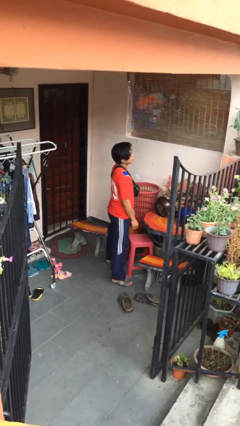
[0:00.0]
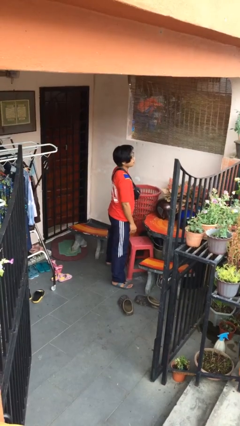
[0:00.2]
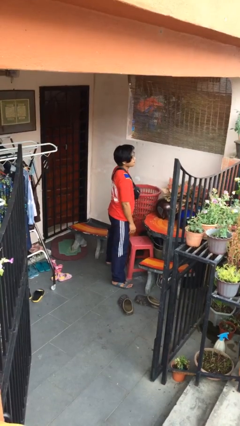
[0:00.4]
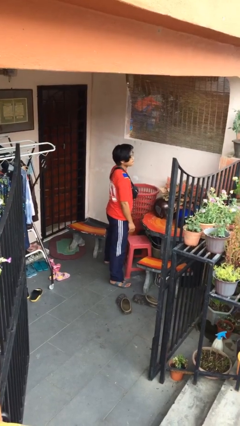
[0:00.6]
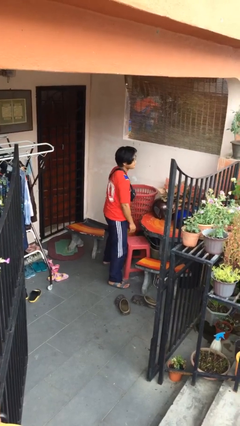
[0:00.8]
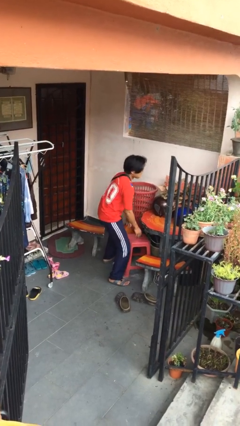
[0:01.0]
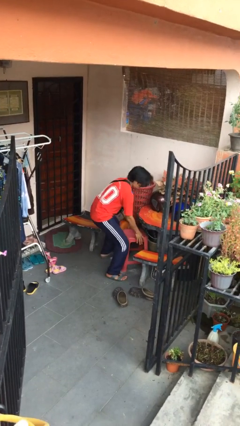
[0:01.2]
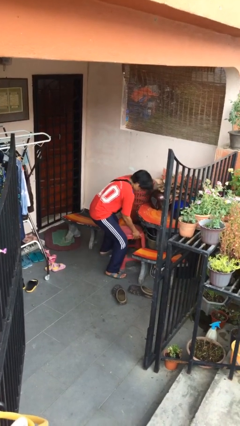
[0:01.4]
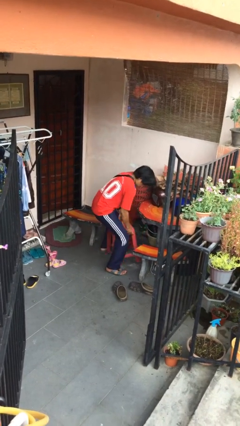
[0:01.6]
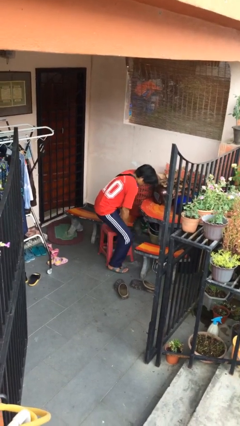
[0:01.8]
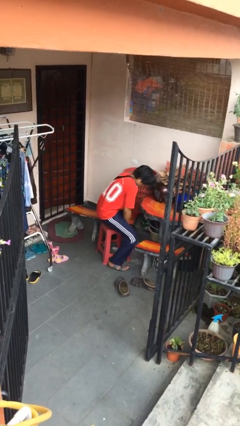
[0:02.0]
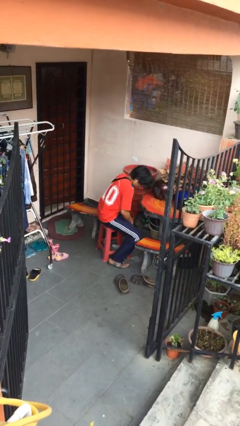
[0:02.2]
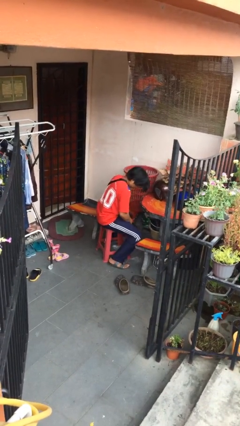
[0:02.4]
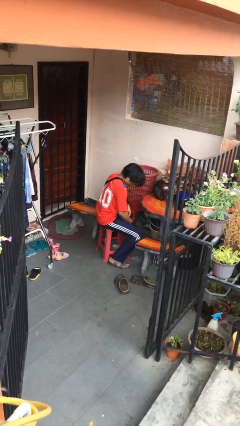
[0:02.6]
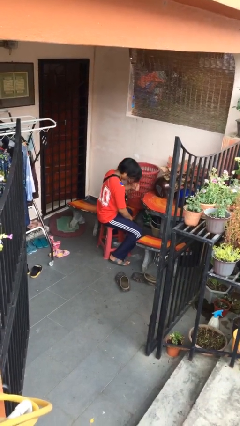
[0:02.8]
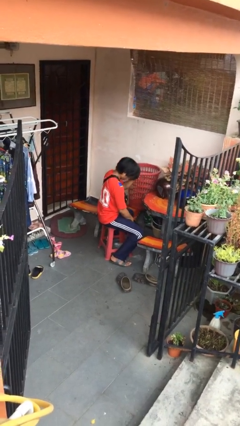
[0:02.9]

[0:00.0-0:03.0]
person sits down

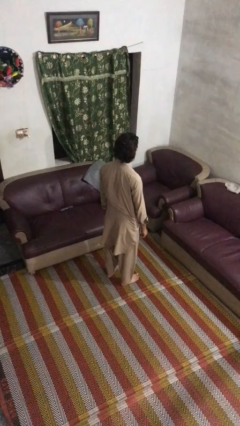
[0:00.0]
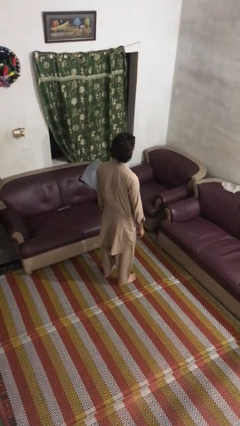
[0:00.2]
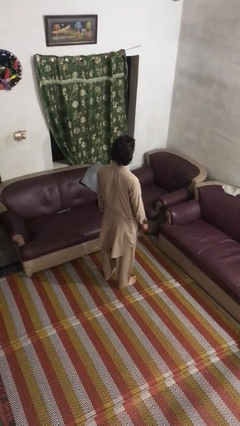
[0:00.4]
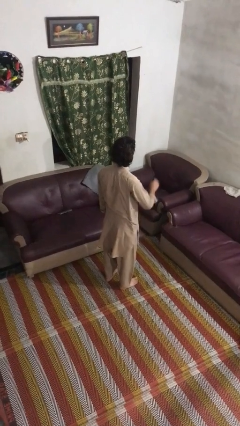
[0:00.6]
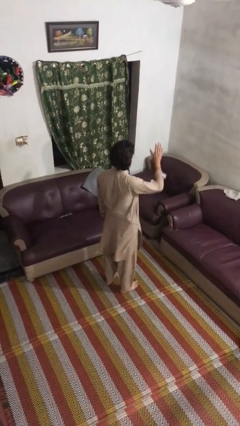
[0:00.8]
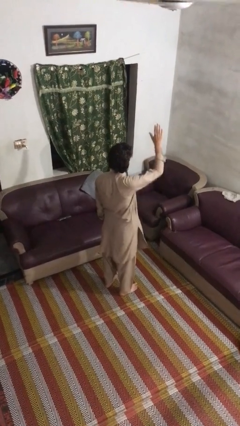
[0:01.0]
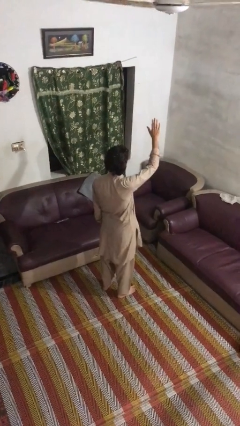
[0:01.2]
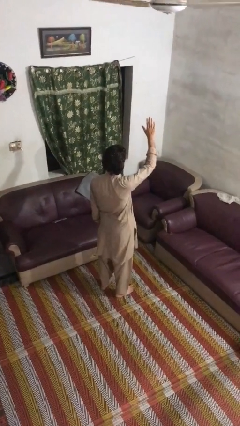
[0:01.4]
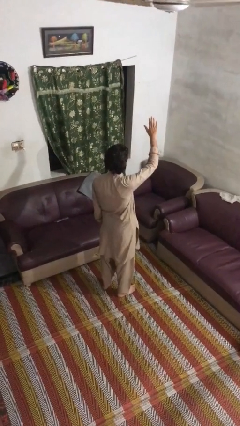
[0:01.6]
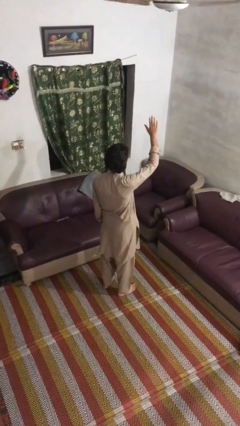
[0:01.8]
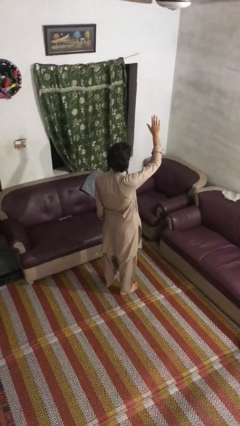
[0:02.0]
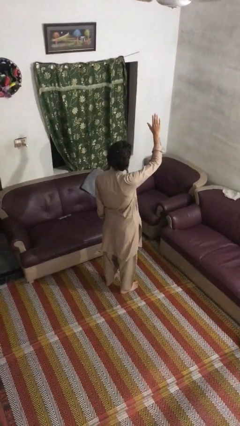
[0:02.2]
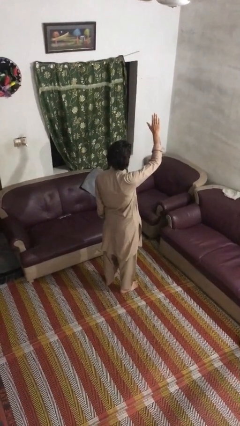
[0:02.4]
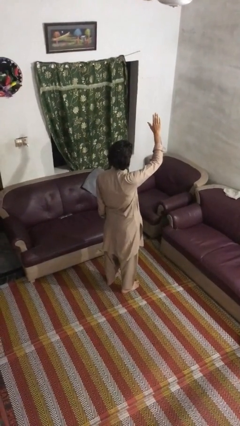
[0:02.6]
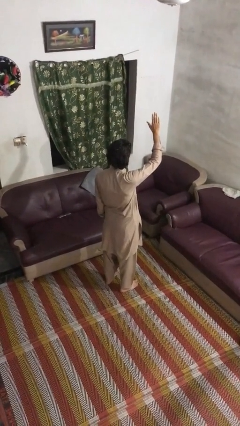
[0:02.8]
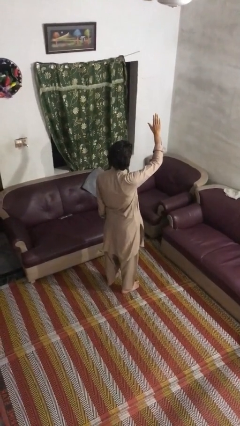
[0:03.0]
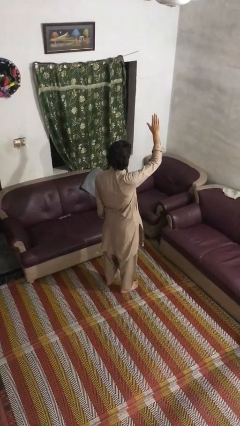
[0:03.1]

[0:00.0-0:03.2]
person gestures raise hand

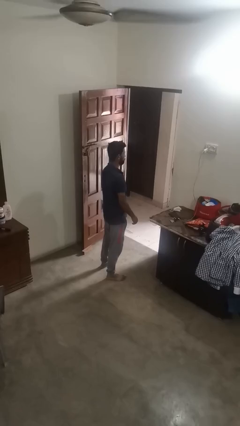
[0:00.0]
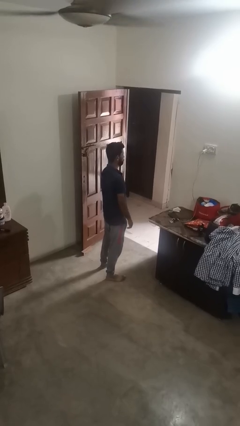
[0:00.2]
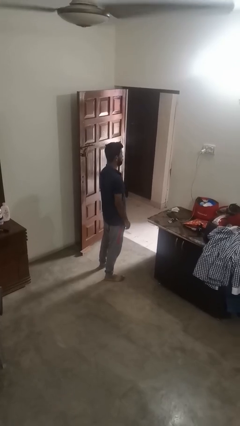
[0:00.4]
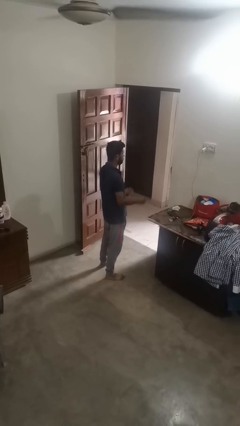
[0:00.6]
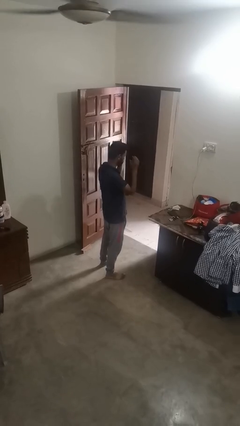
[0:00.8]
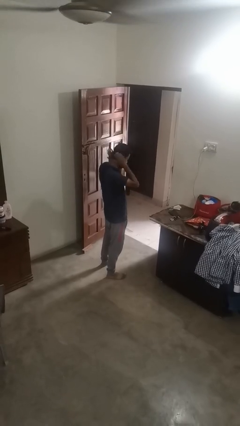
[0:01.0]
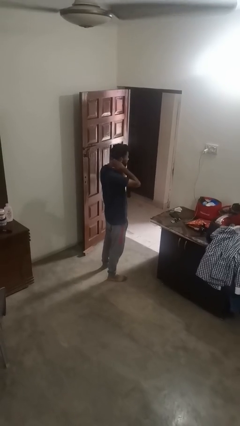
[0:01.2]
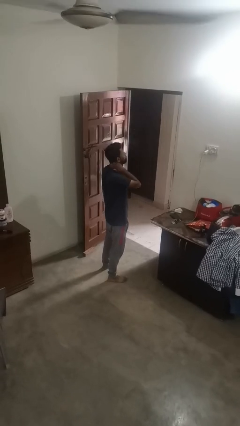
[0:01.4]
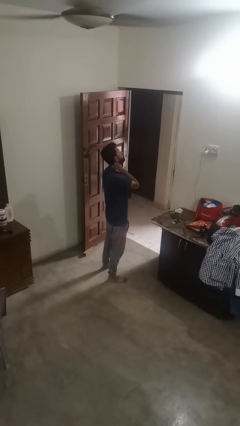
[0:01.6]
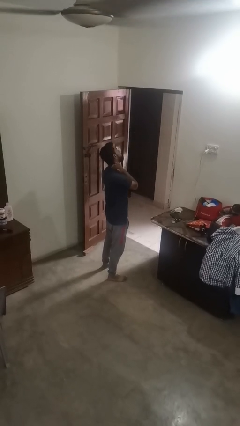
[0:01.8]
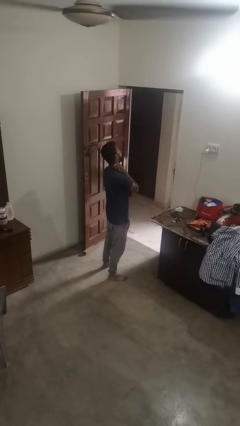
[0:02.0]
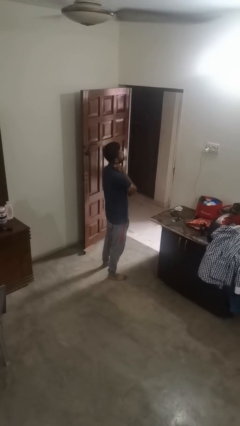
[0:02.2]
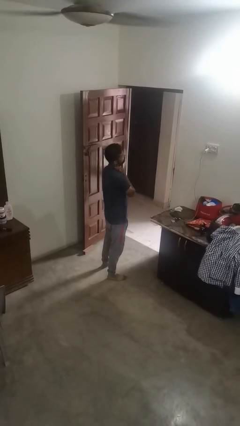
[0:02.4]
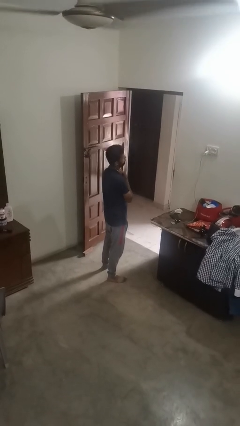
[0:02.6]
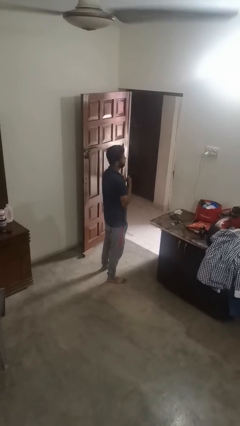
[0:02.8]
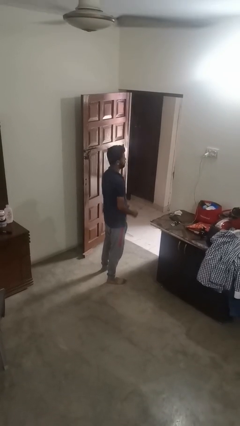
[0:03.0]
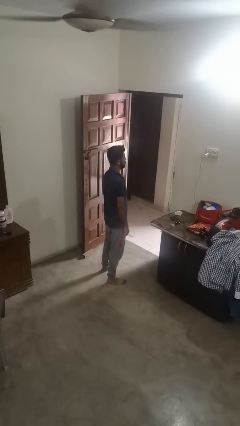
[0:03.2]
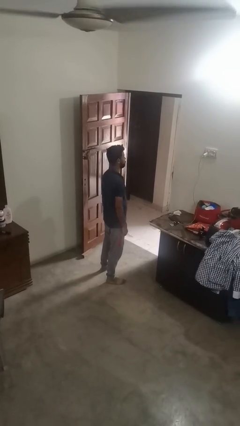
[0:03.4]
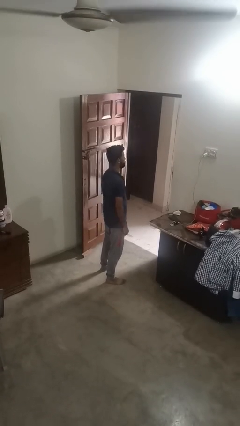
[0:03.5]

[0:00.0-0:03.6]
person rubs neck

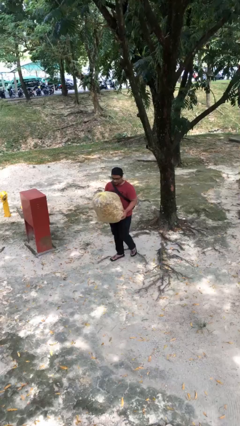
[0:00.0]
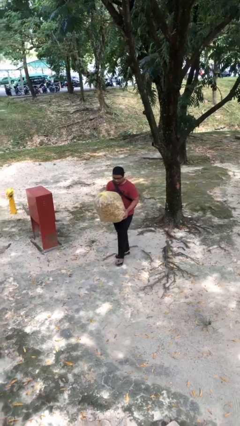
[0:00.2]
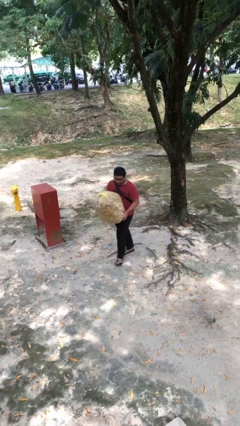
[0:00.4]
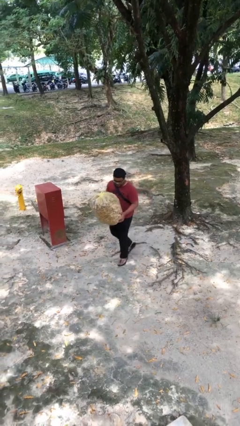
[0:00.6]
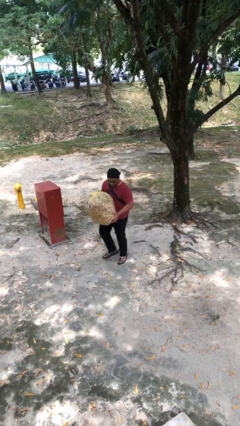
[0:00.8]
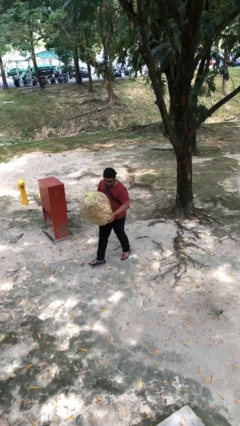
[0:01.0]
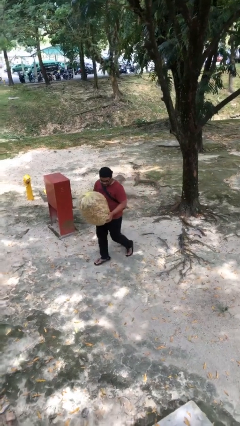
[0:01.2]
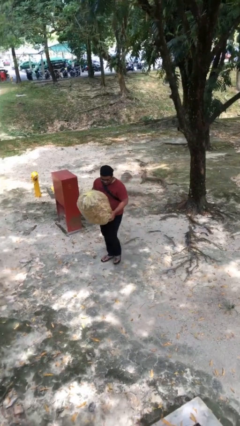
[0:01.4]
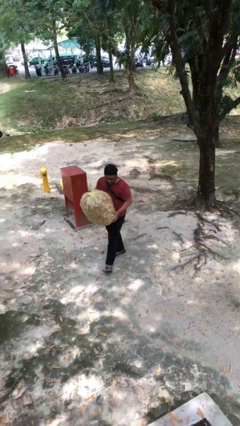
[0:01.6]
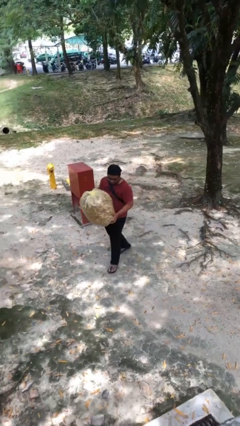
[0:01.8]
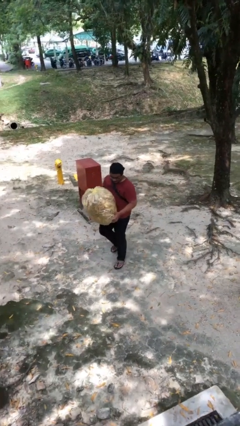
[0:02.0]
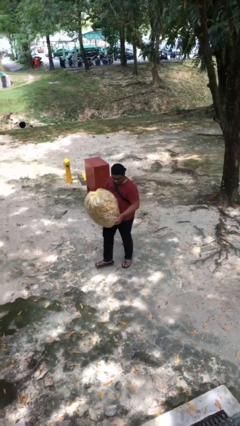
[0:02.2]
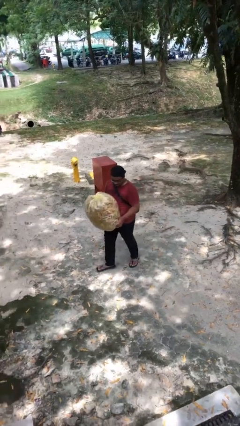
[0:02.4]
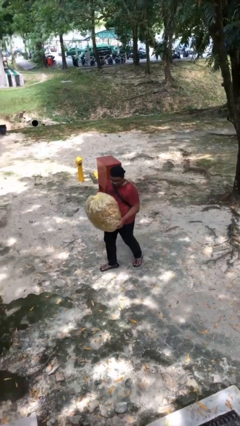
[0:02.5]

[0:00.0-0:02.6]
person carries heavy object

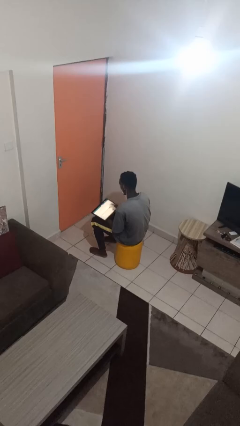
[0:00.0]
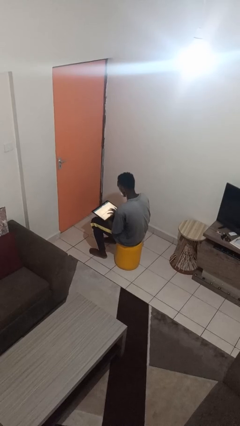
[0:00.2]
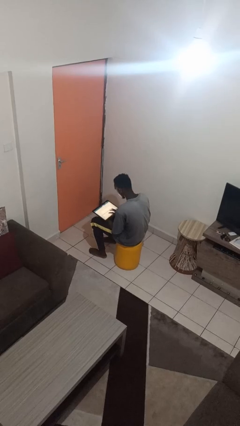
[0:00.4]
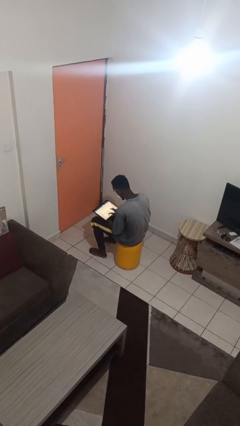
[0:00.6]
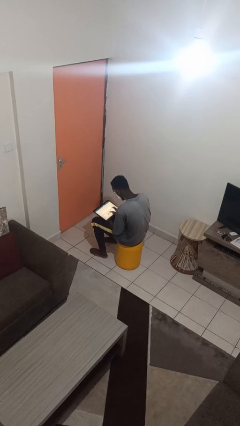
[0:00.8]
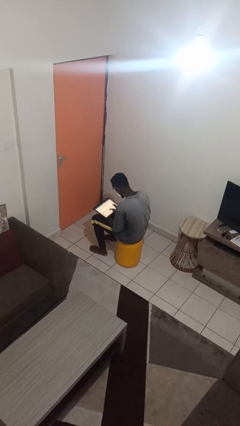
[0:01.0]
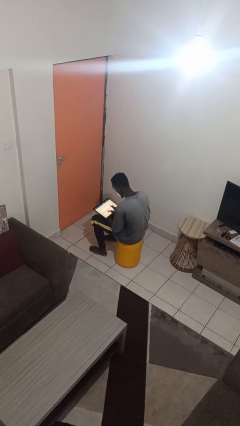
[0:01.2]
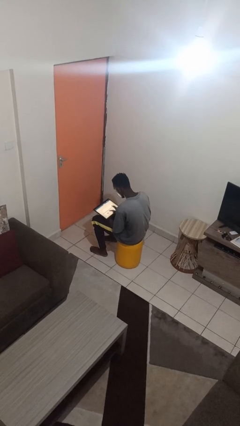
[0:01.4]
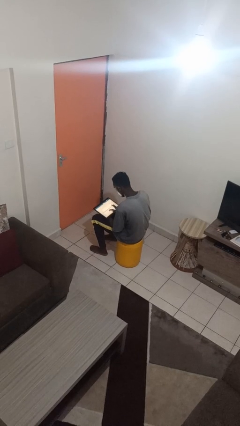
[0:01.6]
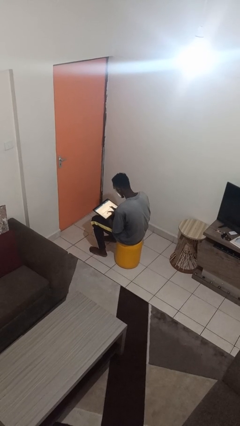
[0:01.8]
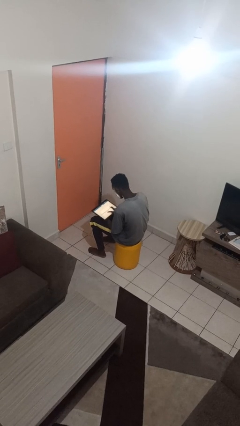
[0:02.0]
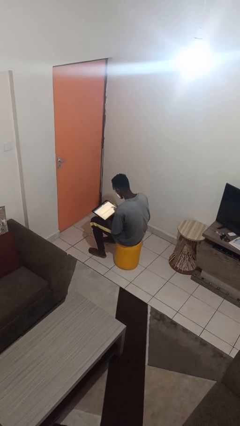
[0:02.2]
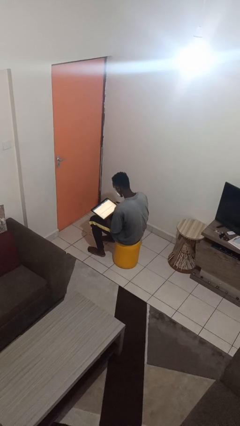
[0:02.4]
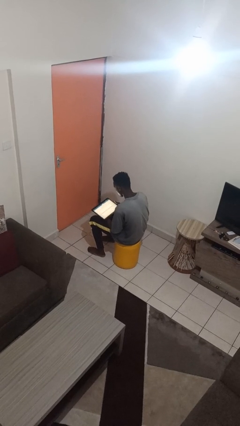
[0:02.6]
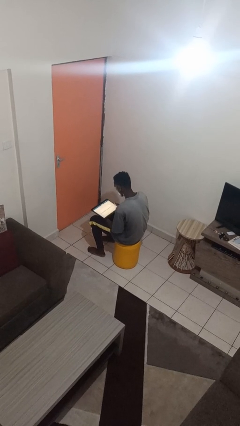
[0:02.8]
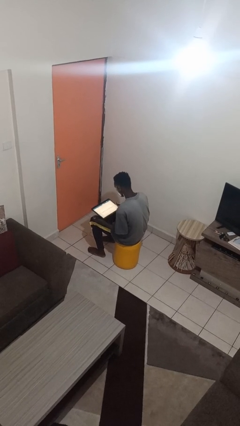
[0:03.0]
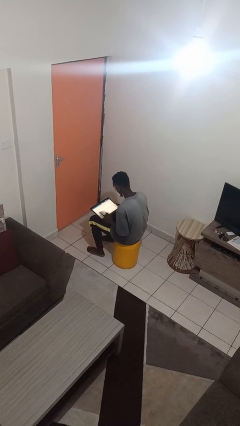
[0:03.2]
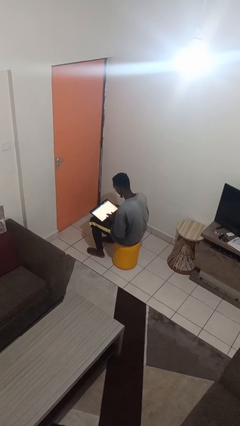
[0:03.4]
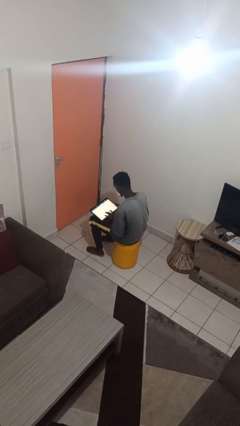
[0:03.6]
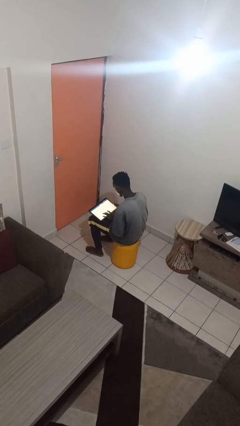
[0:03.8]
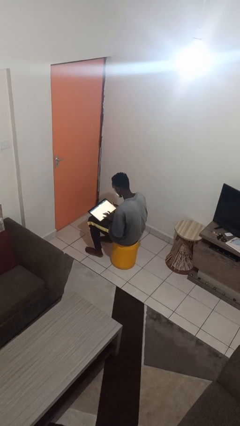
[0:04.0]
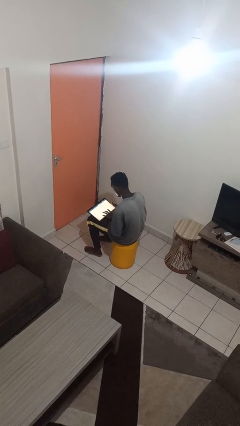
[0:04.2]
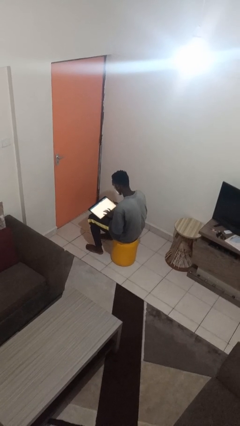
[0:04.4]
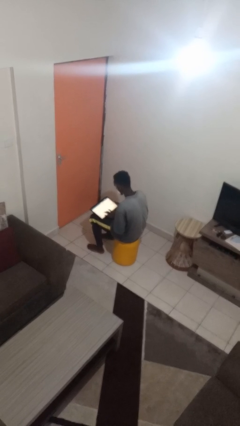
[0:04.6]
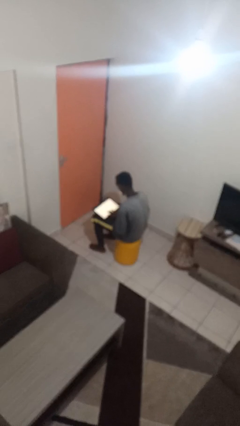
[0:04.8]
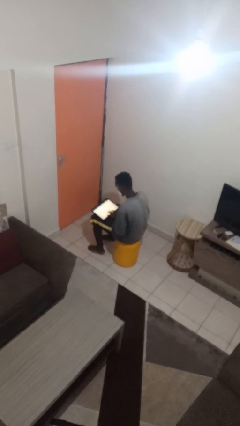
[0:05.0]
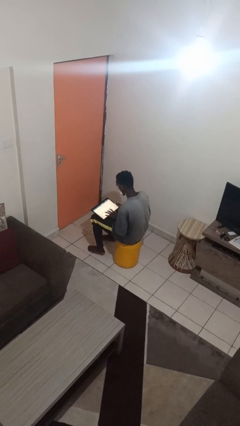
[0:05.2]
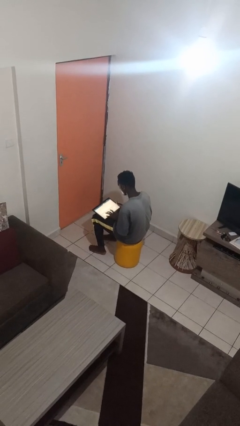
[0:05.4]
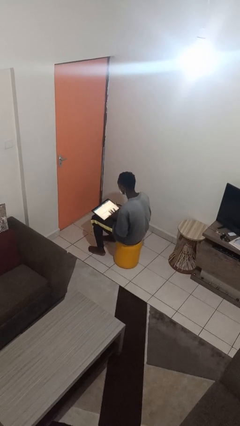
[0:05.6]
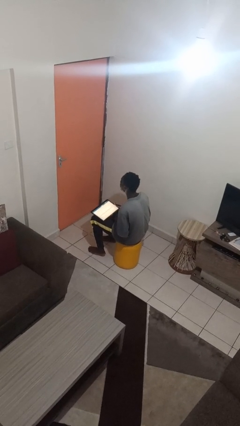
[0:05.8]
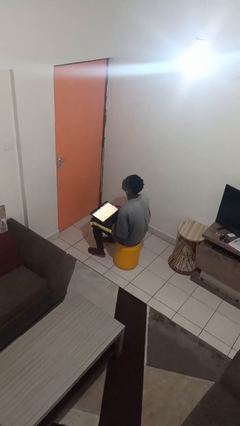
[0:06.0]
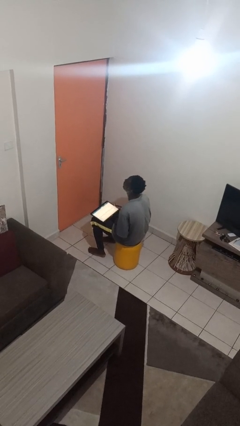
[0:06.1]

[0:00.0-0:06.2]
person interacts with tablet
